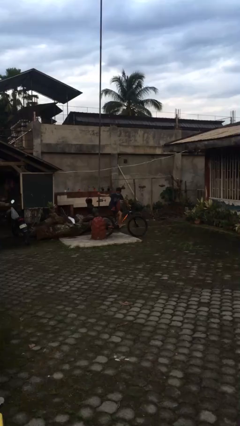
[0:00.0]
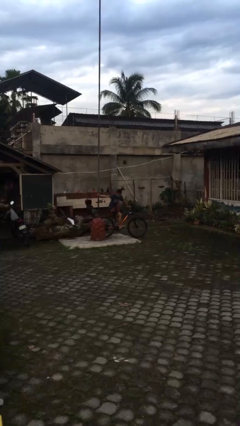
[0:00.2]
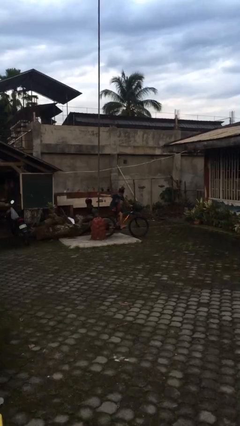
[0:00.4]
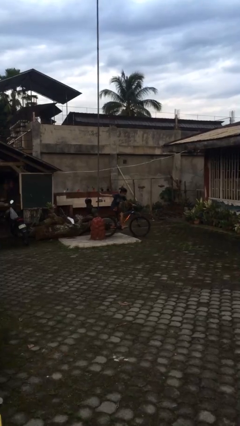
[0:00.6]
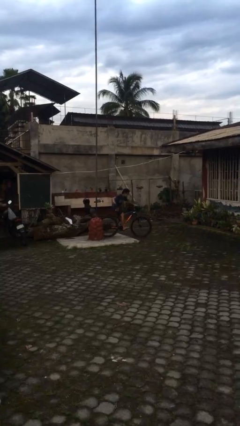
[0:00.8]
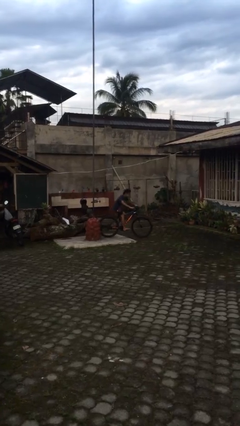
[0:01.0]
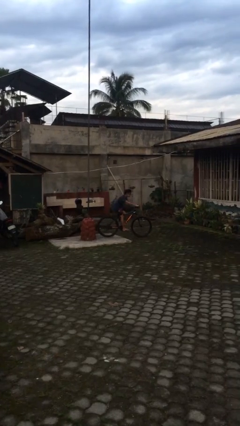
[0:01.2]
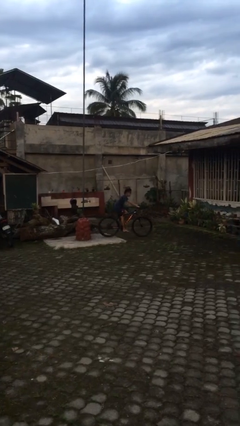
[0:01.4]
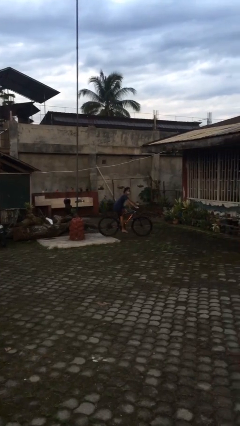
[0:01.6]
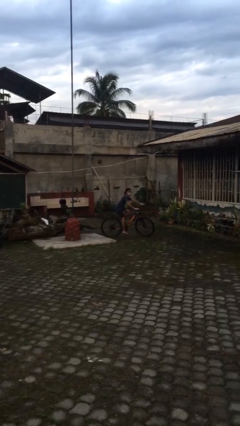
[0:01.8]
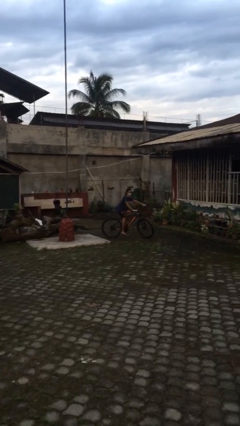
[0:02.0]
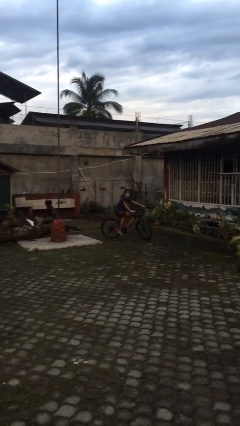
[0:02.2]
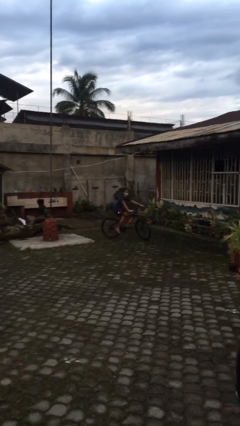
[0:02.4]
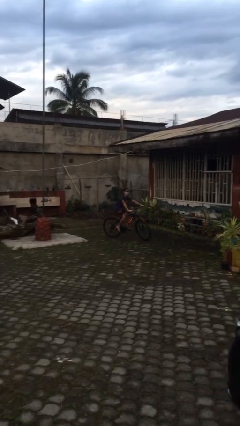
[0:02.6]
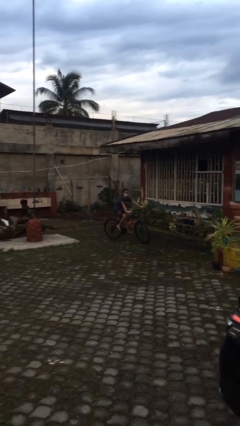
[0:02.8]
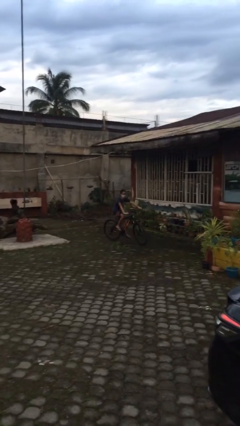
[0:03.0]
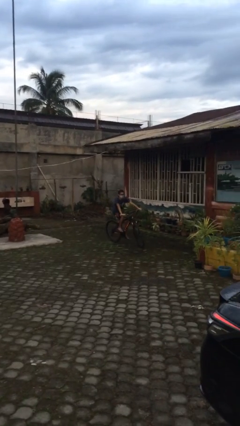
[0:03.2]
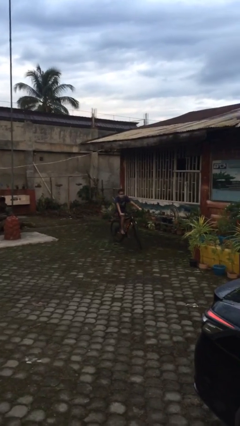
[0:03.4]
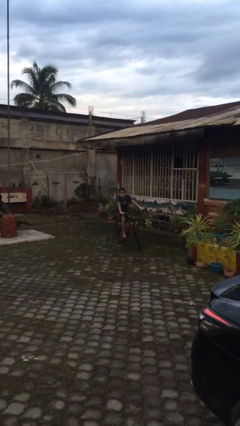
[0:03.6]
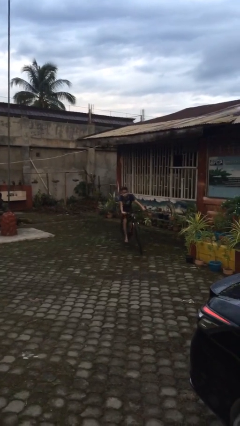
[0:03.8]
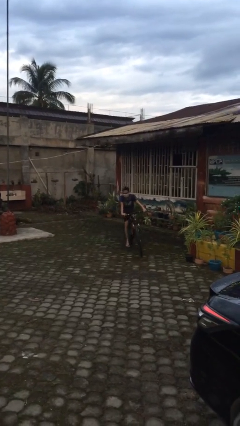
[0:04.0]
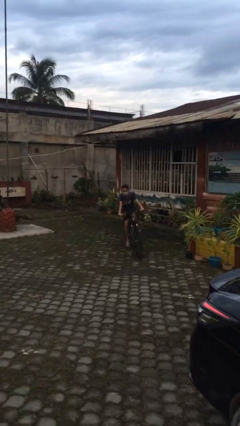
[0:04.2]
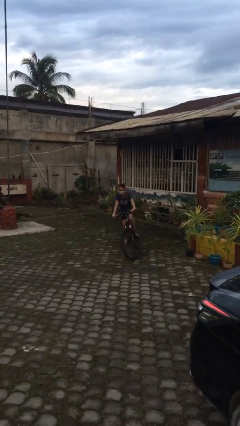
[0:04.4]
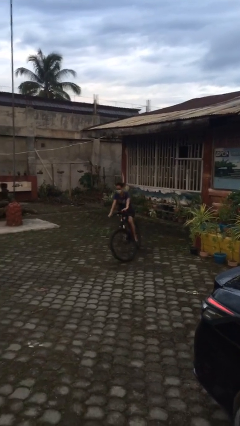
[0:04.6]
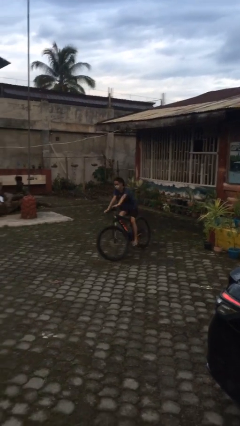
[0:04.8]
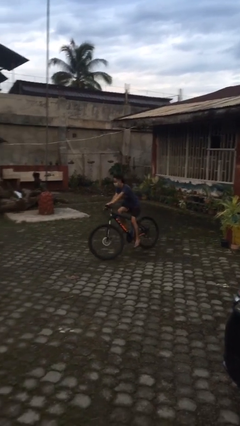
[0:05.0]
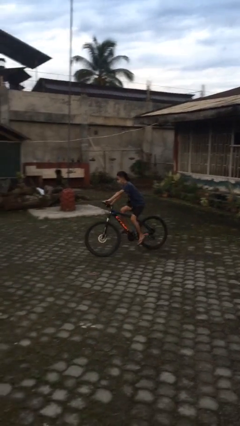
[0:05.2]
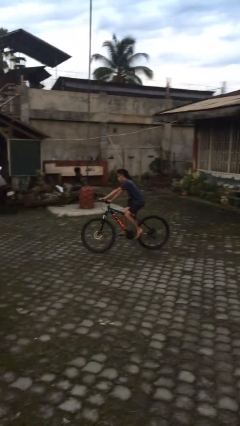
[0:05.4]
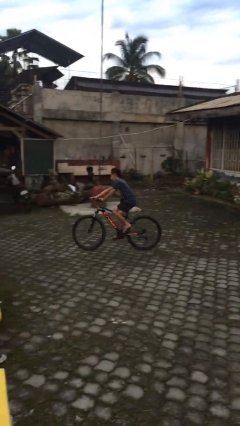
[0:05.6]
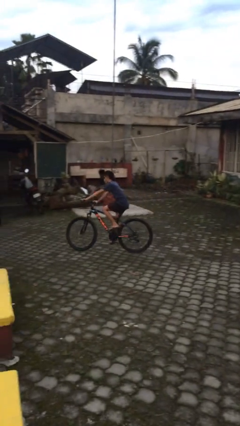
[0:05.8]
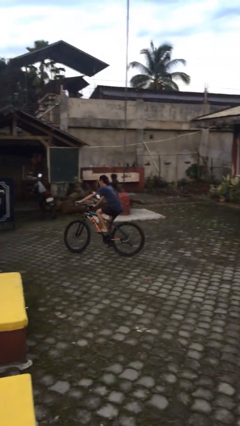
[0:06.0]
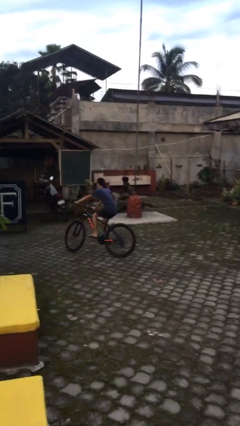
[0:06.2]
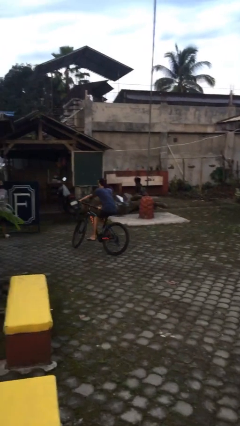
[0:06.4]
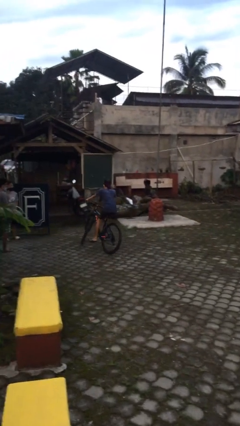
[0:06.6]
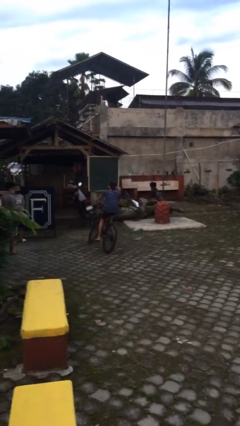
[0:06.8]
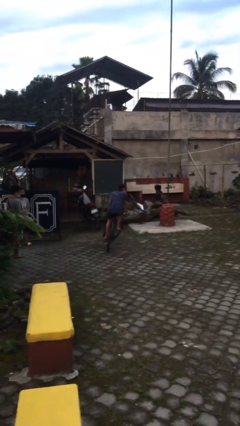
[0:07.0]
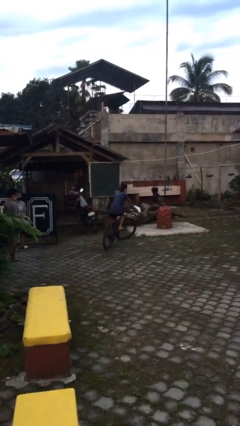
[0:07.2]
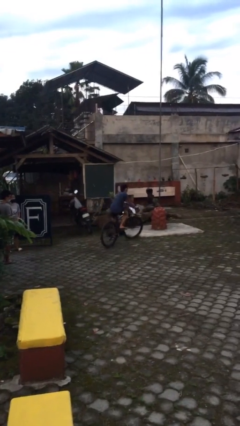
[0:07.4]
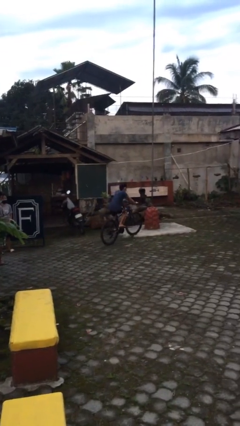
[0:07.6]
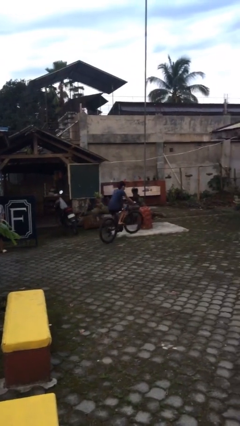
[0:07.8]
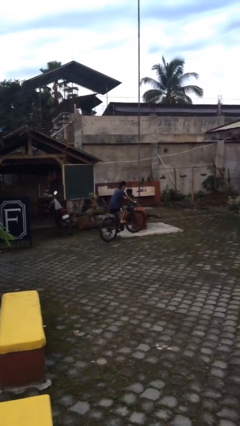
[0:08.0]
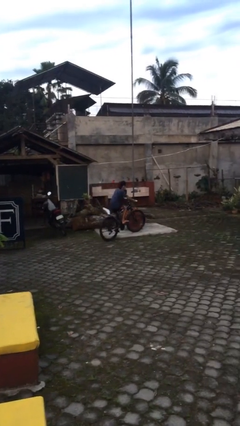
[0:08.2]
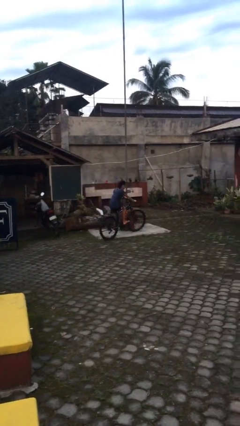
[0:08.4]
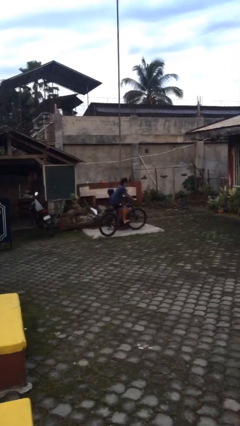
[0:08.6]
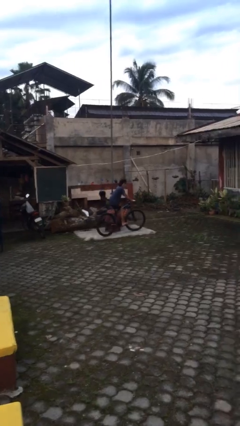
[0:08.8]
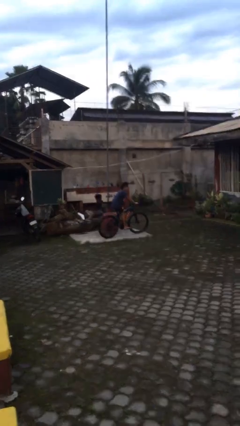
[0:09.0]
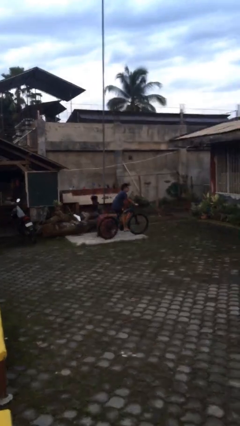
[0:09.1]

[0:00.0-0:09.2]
person rides bicycle

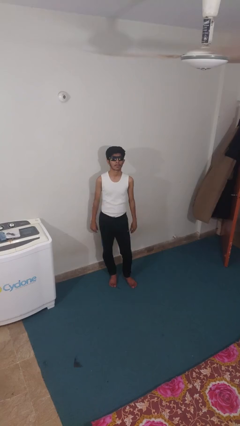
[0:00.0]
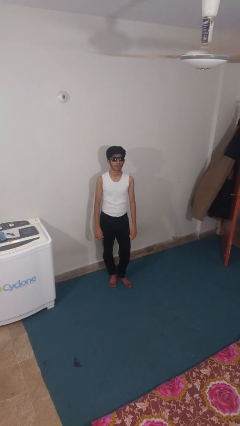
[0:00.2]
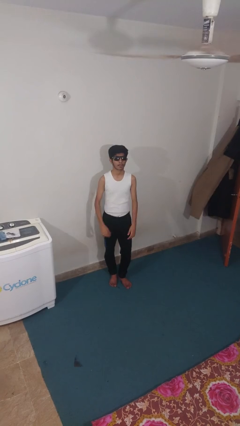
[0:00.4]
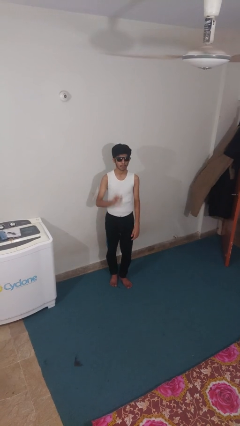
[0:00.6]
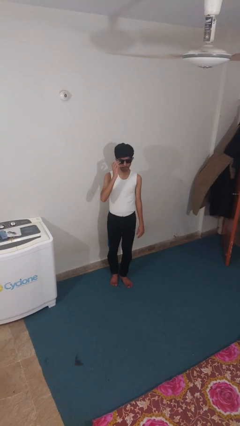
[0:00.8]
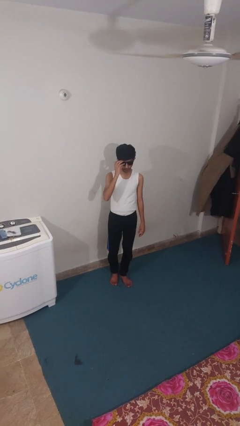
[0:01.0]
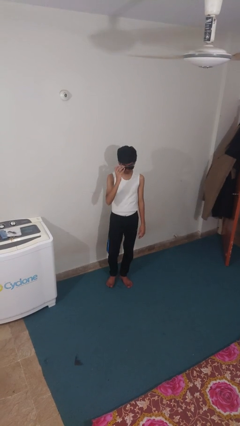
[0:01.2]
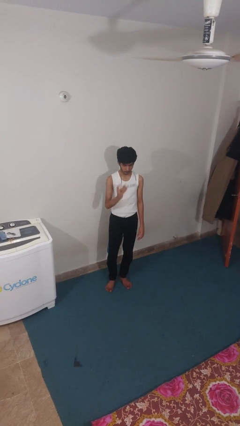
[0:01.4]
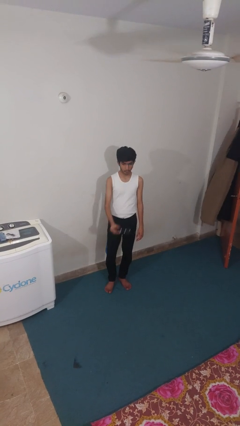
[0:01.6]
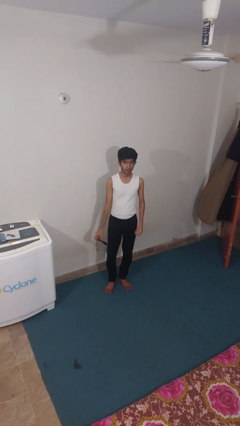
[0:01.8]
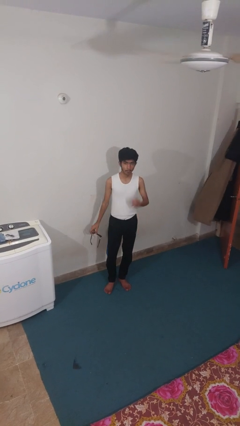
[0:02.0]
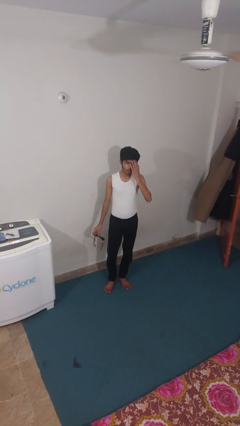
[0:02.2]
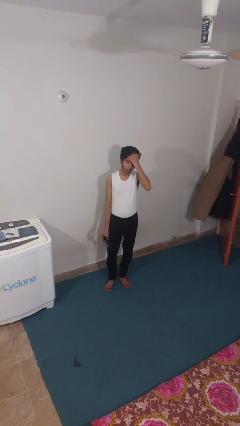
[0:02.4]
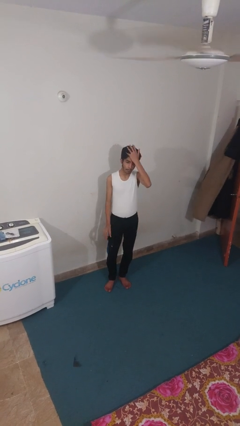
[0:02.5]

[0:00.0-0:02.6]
person takes off sunglasses

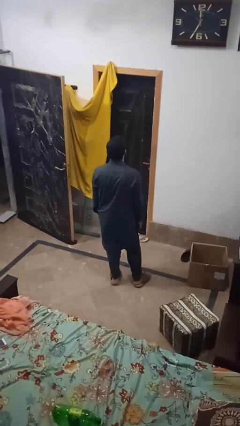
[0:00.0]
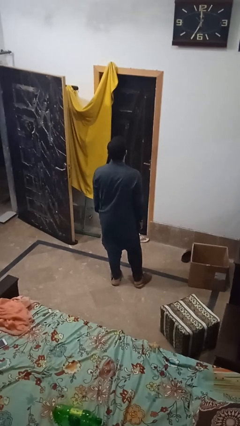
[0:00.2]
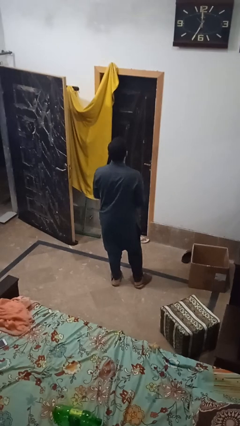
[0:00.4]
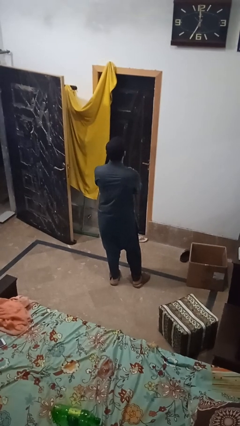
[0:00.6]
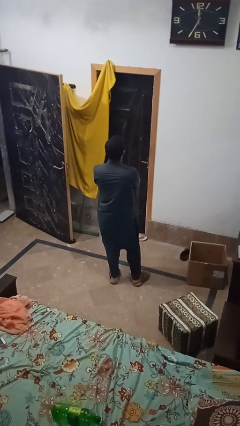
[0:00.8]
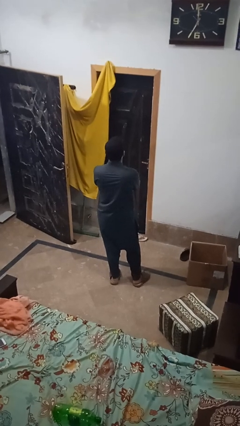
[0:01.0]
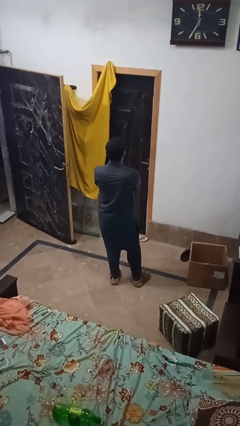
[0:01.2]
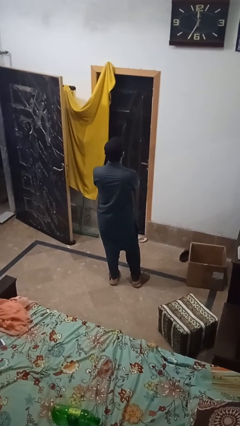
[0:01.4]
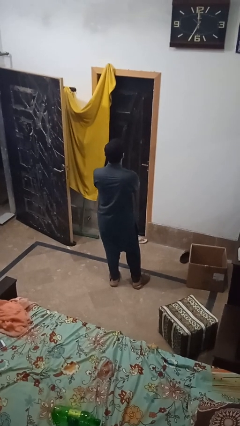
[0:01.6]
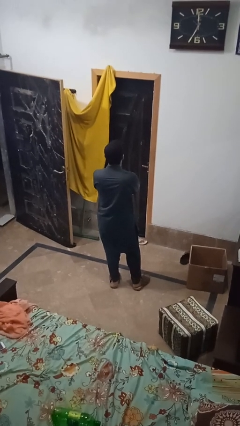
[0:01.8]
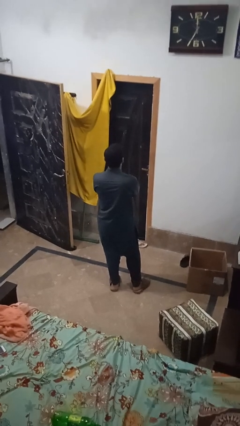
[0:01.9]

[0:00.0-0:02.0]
person gestures arms x

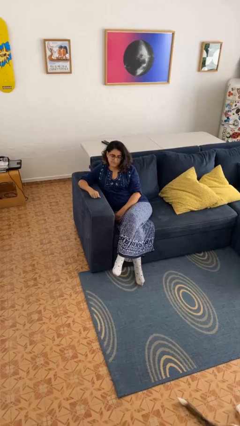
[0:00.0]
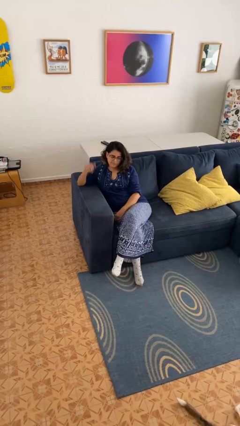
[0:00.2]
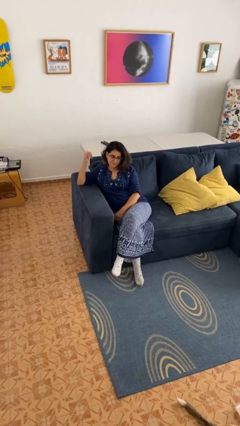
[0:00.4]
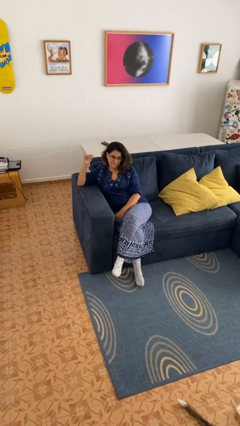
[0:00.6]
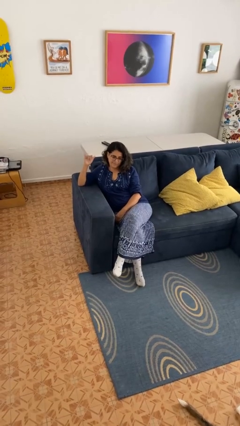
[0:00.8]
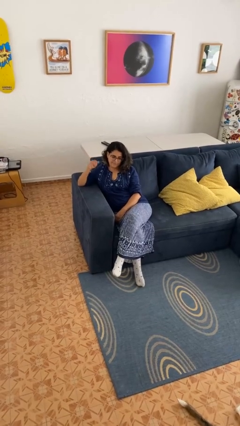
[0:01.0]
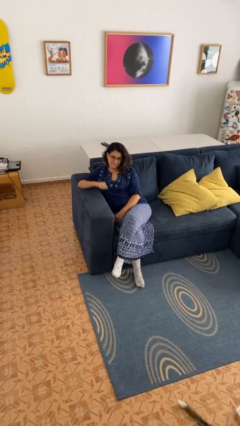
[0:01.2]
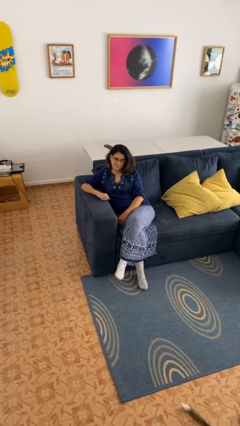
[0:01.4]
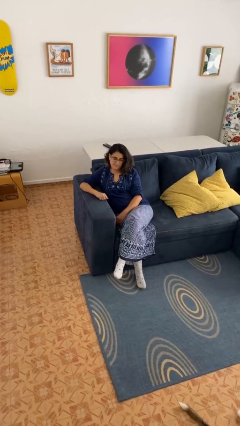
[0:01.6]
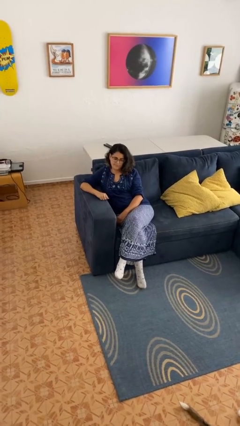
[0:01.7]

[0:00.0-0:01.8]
person gestures hang loose

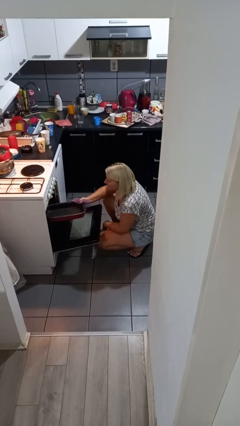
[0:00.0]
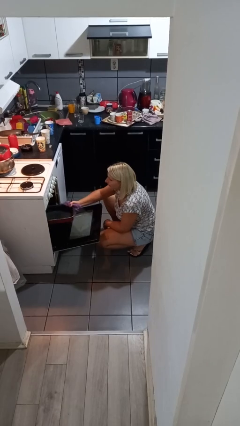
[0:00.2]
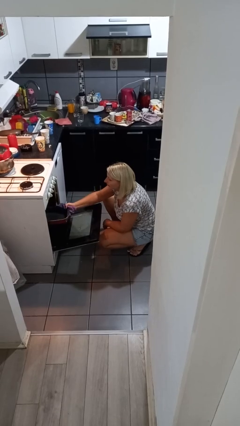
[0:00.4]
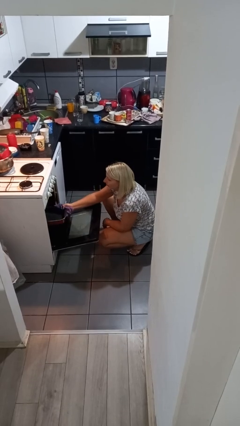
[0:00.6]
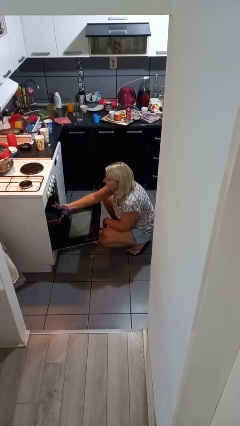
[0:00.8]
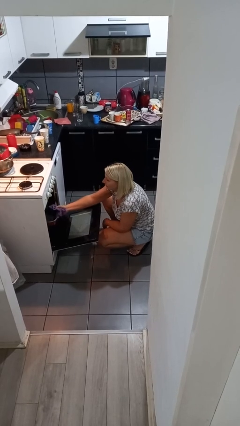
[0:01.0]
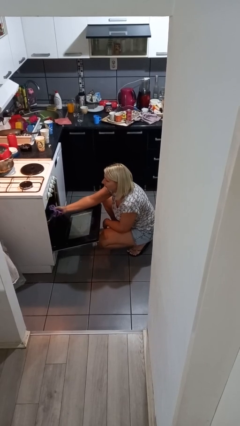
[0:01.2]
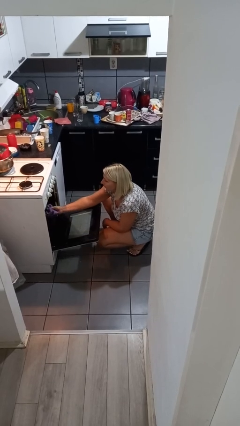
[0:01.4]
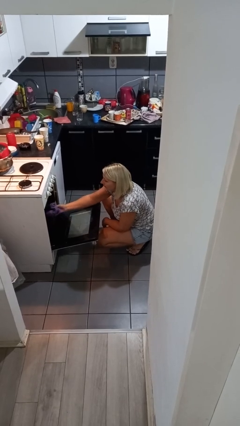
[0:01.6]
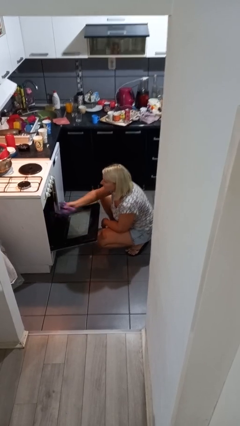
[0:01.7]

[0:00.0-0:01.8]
person puts object into oven
